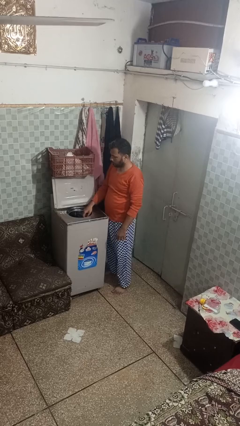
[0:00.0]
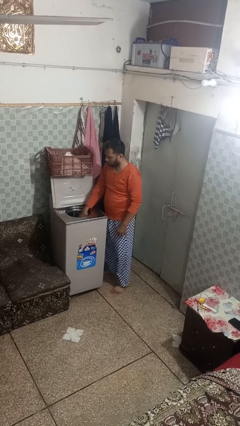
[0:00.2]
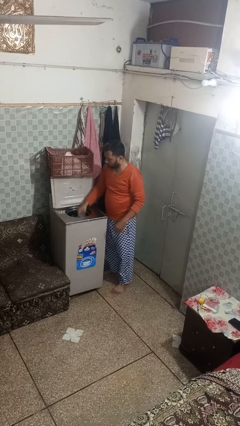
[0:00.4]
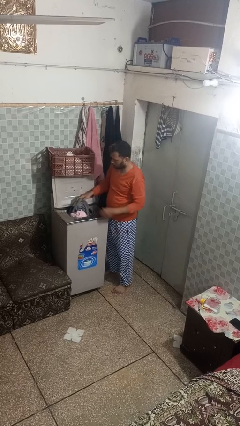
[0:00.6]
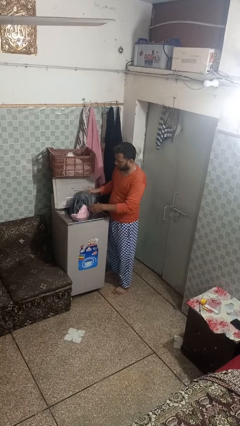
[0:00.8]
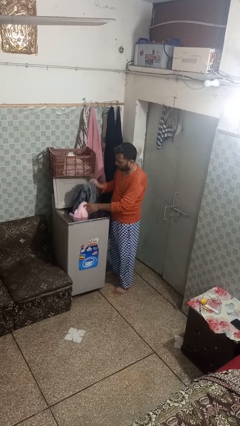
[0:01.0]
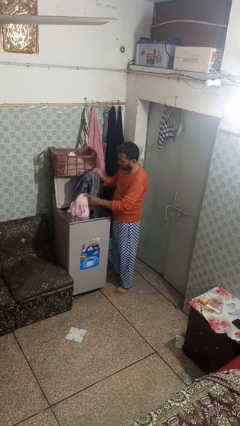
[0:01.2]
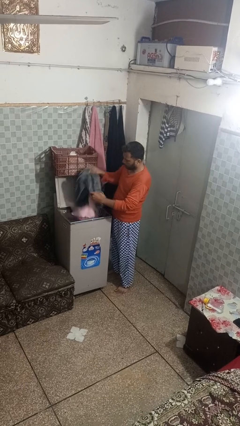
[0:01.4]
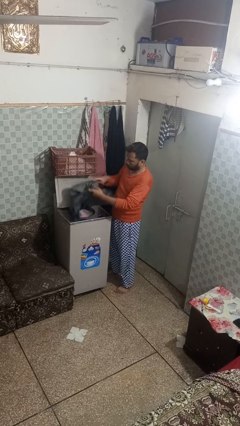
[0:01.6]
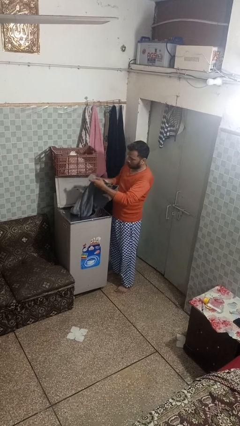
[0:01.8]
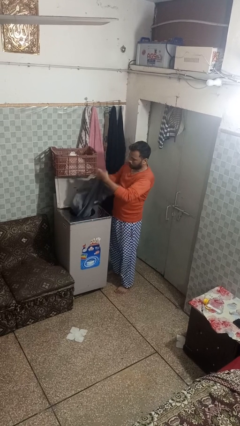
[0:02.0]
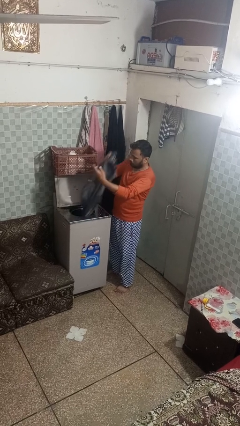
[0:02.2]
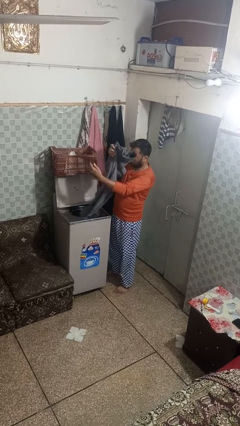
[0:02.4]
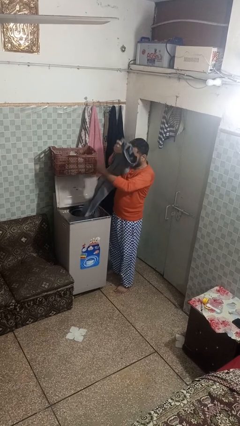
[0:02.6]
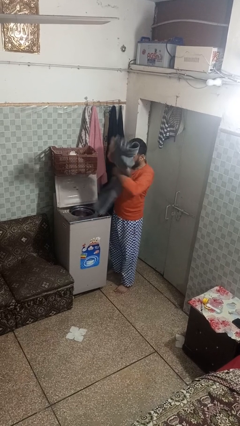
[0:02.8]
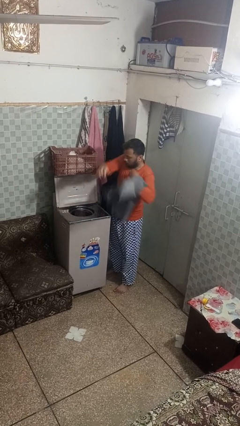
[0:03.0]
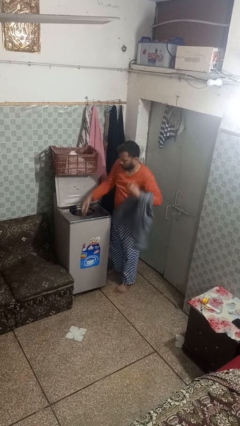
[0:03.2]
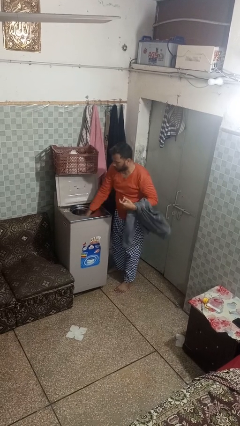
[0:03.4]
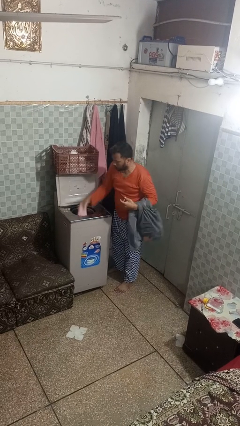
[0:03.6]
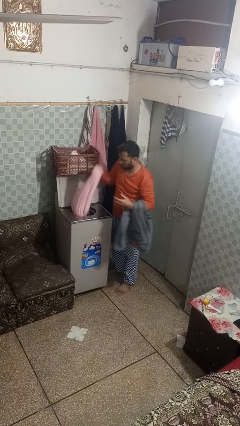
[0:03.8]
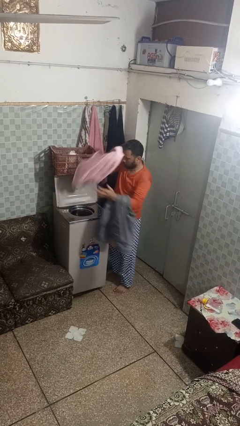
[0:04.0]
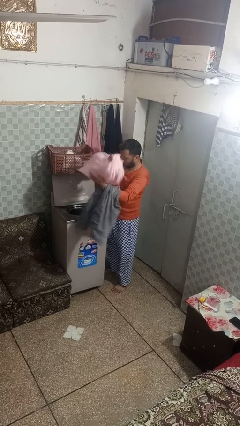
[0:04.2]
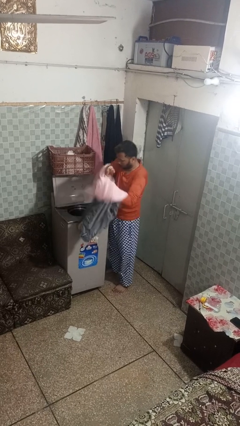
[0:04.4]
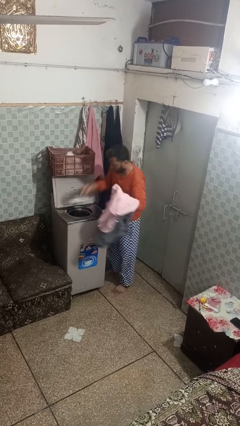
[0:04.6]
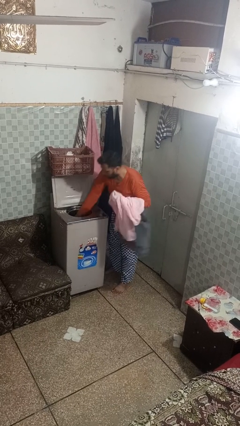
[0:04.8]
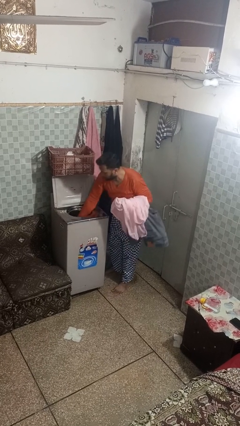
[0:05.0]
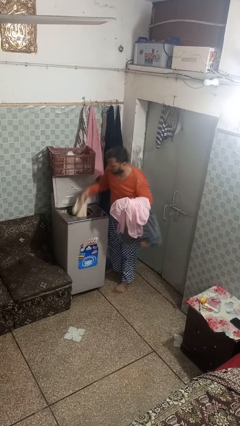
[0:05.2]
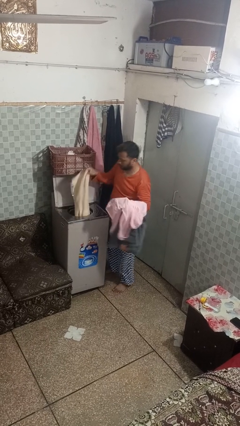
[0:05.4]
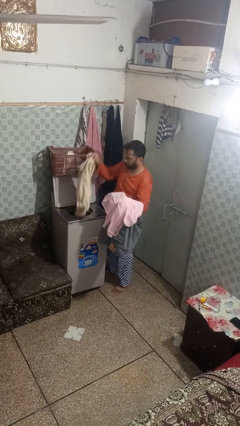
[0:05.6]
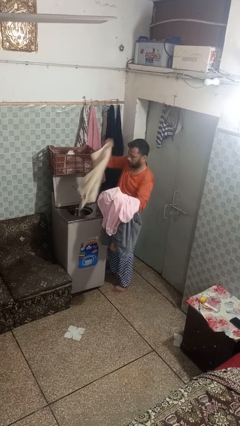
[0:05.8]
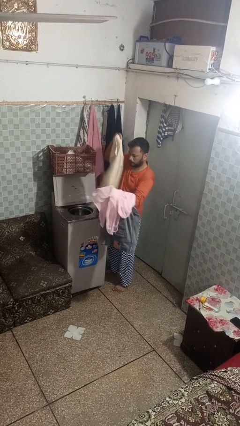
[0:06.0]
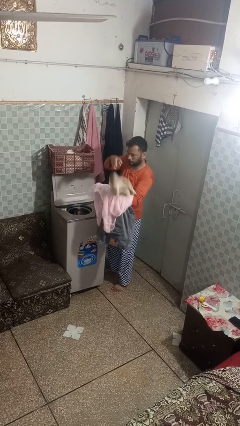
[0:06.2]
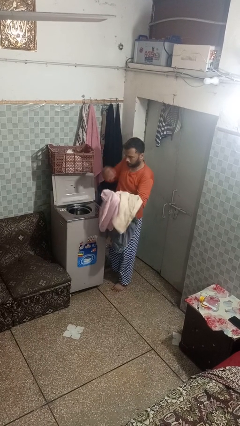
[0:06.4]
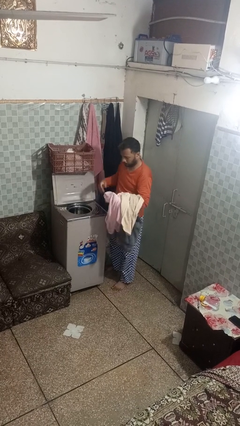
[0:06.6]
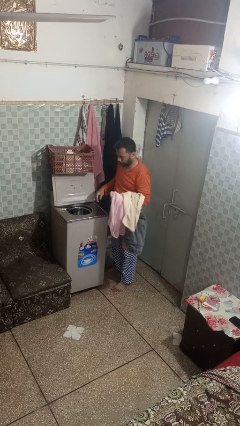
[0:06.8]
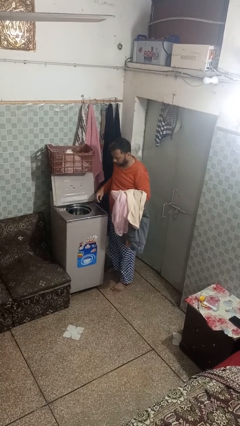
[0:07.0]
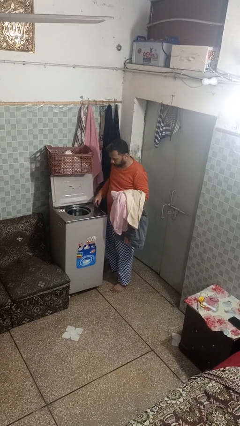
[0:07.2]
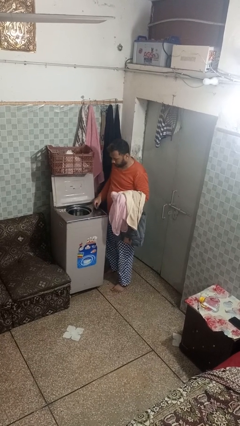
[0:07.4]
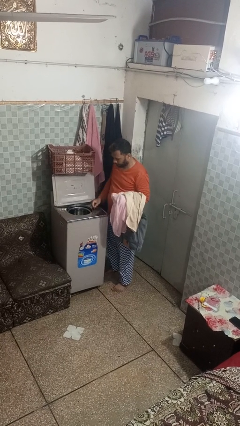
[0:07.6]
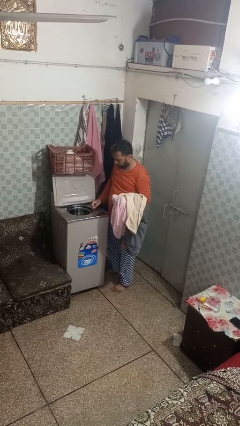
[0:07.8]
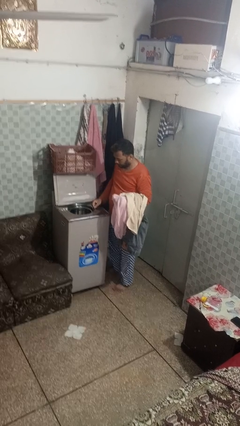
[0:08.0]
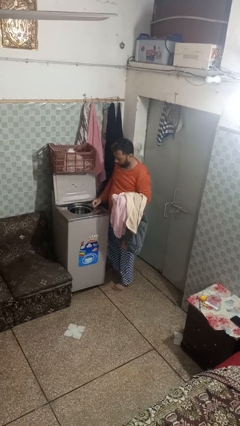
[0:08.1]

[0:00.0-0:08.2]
person unloads dryer

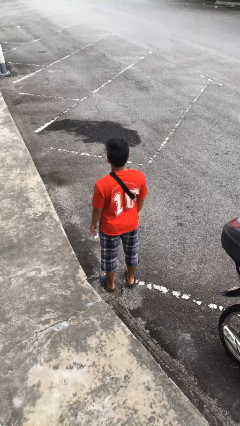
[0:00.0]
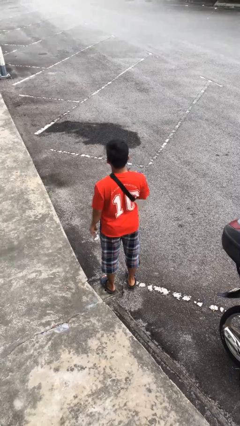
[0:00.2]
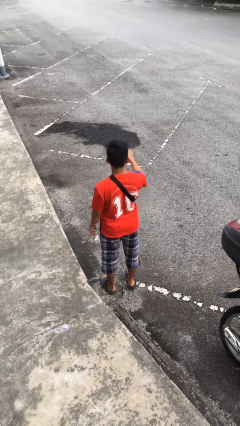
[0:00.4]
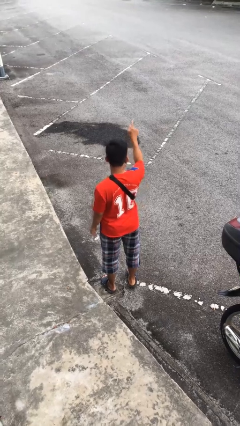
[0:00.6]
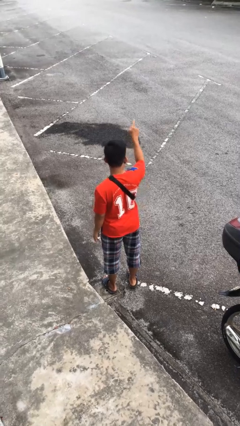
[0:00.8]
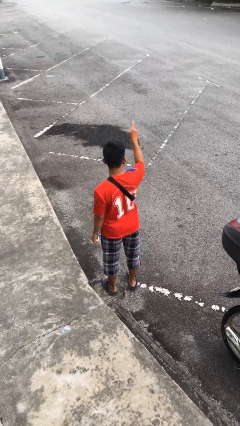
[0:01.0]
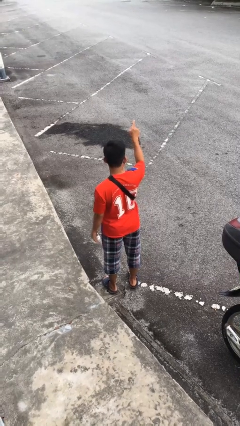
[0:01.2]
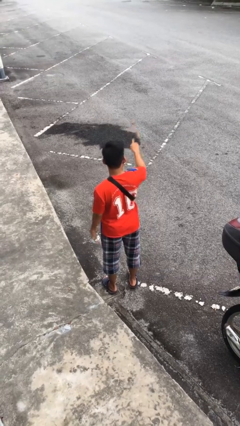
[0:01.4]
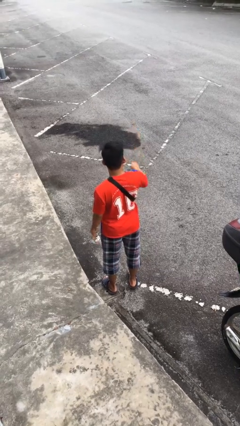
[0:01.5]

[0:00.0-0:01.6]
person points at person

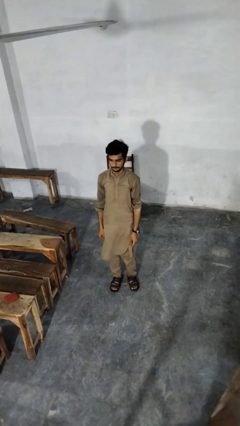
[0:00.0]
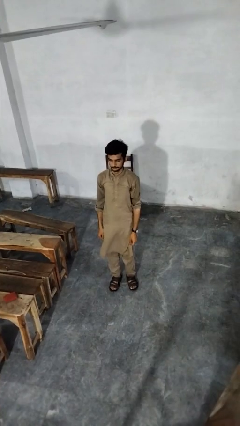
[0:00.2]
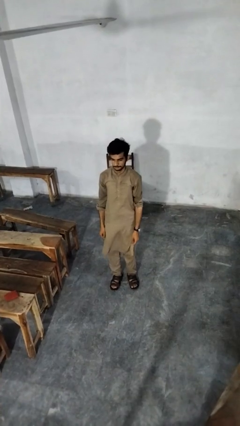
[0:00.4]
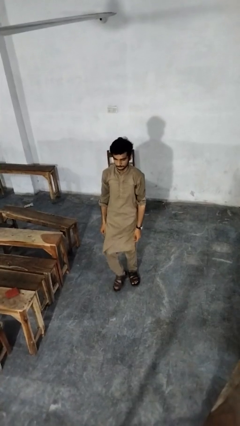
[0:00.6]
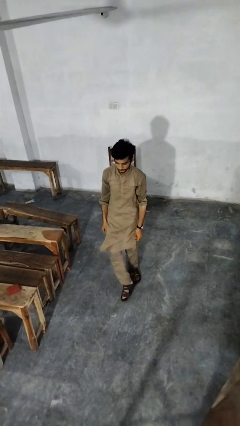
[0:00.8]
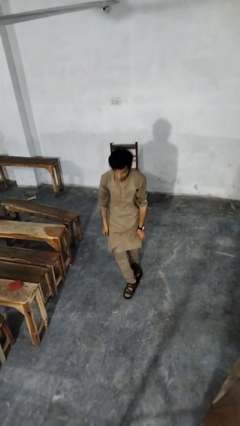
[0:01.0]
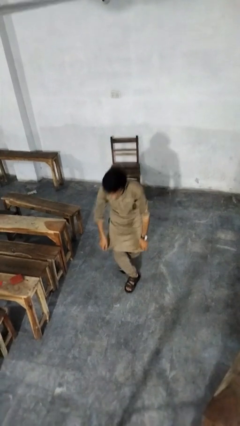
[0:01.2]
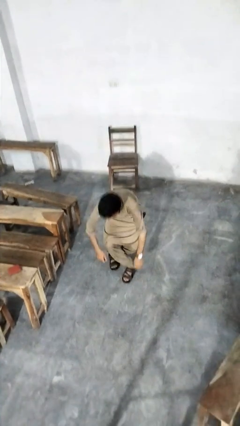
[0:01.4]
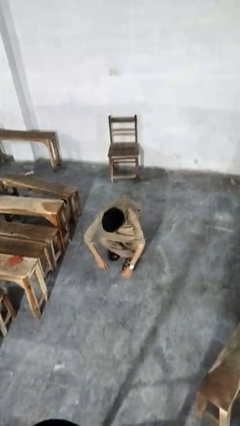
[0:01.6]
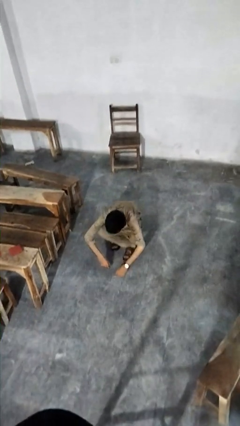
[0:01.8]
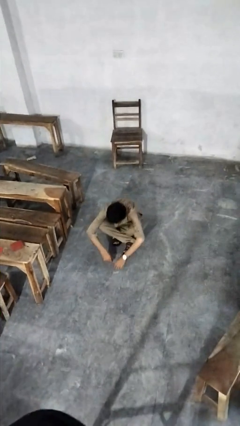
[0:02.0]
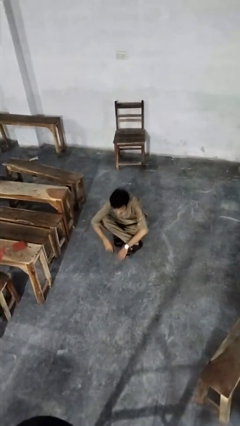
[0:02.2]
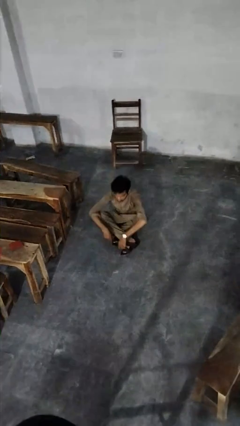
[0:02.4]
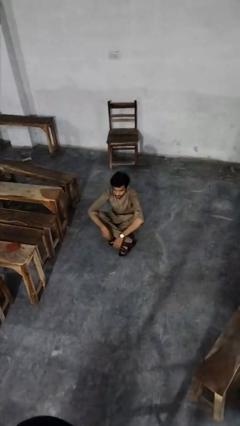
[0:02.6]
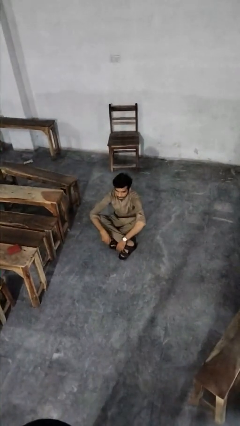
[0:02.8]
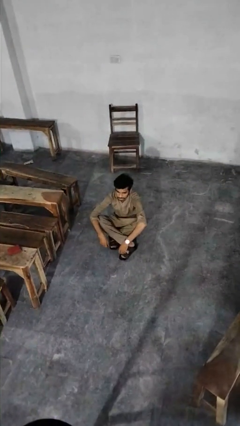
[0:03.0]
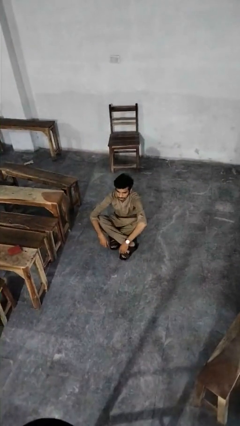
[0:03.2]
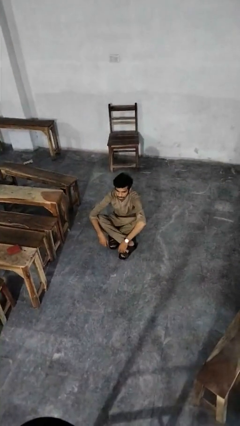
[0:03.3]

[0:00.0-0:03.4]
person sits crisscross

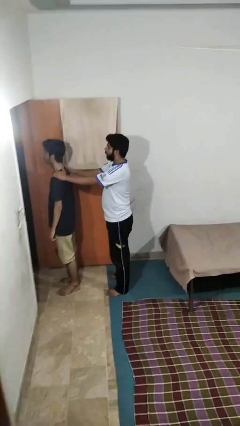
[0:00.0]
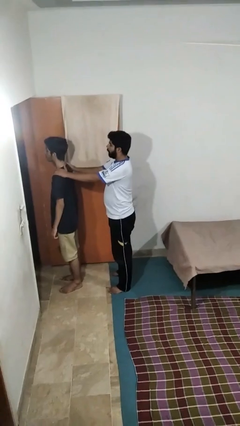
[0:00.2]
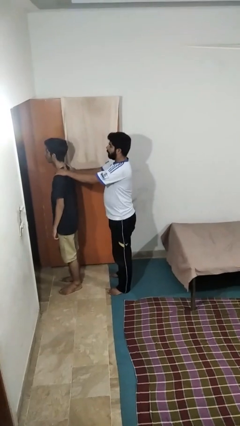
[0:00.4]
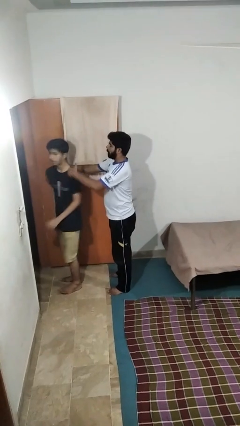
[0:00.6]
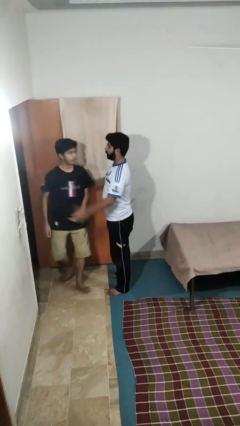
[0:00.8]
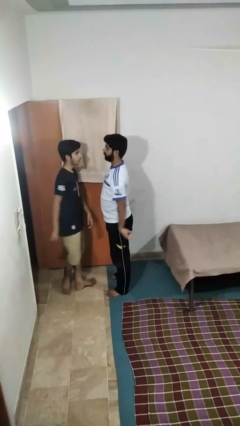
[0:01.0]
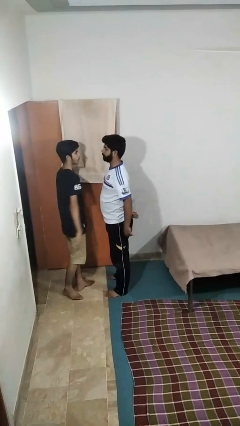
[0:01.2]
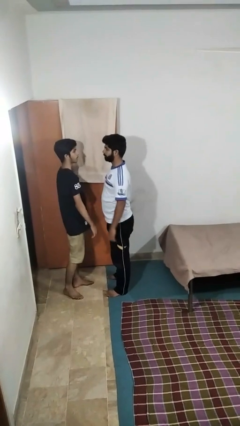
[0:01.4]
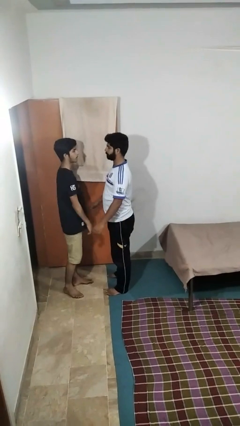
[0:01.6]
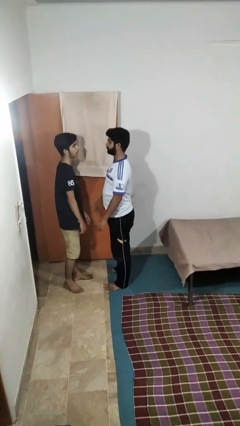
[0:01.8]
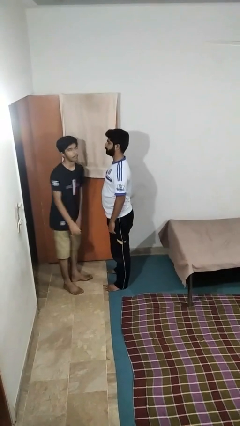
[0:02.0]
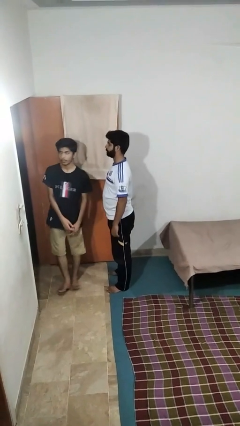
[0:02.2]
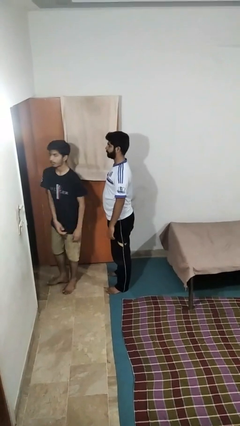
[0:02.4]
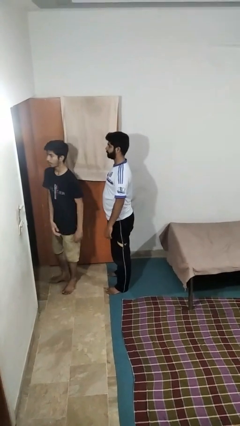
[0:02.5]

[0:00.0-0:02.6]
person spins person around

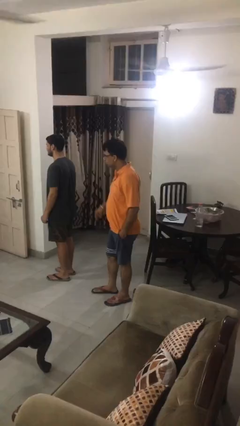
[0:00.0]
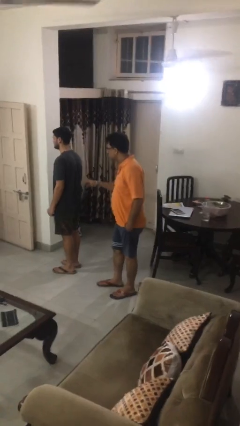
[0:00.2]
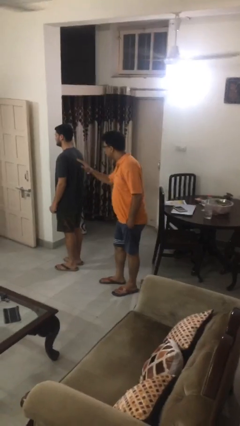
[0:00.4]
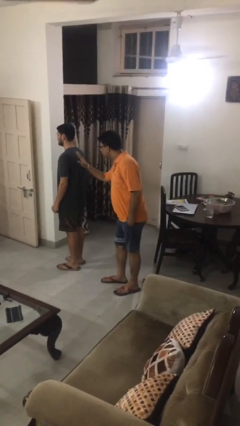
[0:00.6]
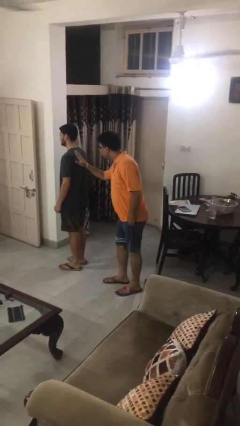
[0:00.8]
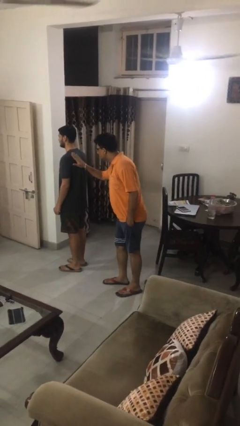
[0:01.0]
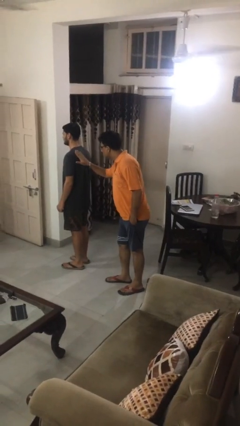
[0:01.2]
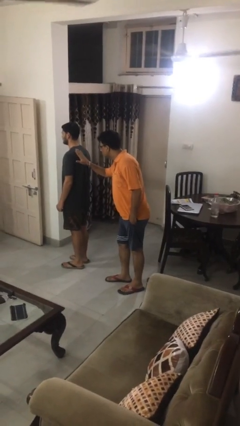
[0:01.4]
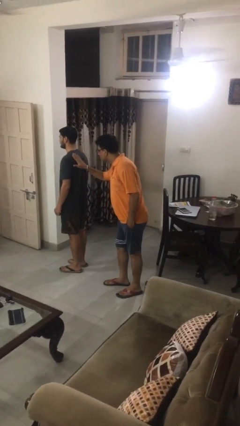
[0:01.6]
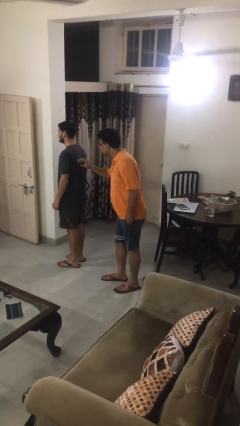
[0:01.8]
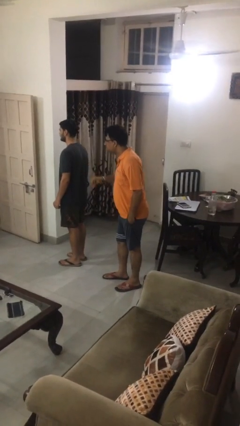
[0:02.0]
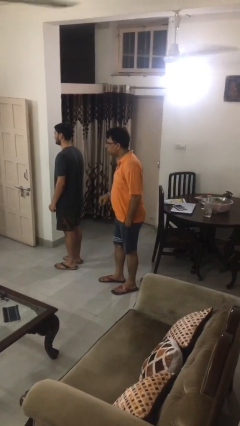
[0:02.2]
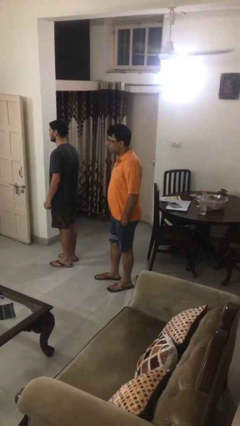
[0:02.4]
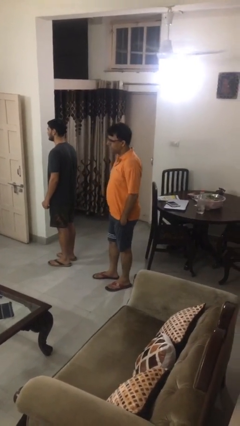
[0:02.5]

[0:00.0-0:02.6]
person touches back of person
